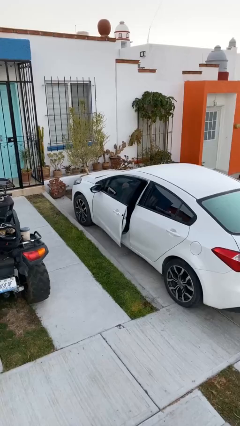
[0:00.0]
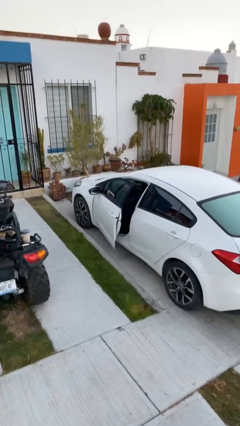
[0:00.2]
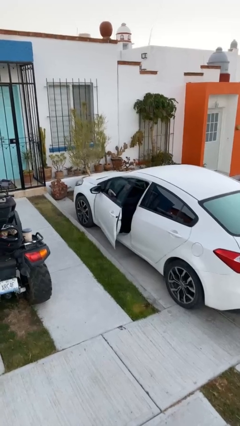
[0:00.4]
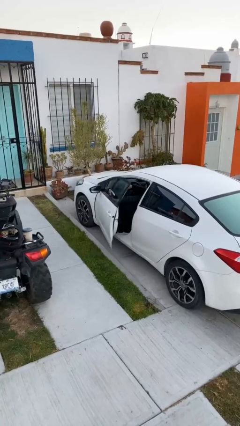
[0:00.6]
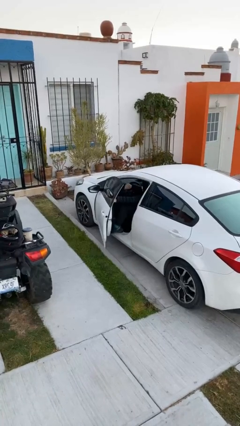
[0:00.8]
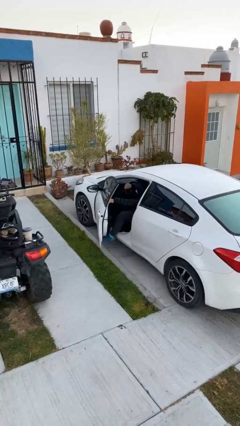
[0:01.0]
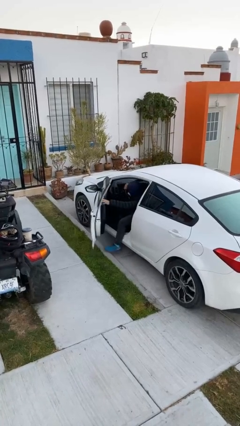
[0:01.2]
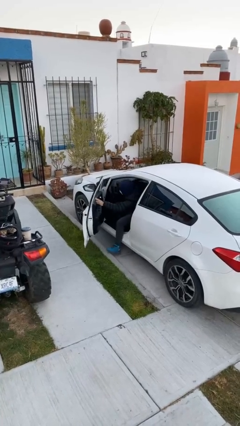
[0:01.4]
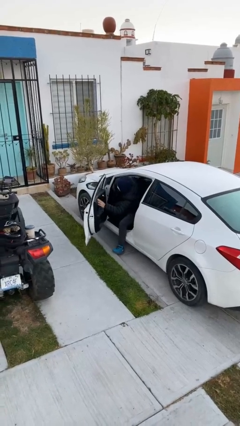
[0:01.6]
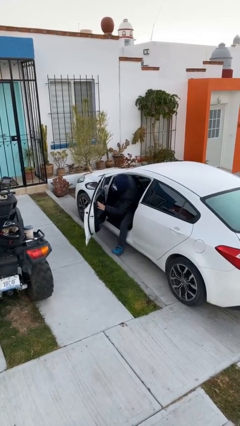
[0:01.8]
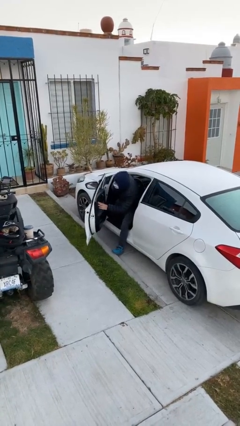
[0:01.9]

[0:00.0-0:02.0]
person opens car door

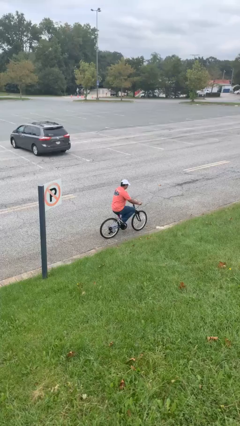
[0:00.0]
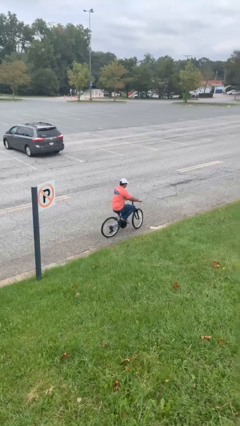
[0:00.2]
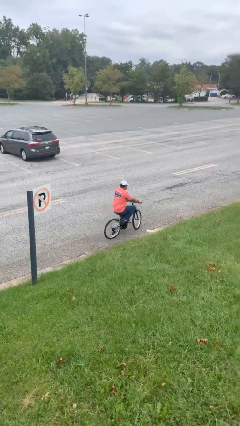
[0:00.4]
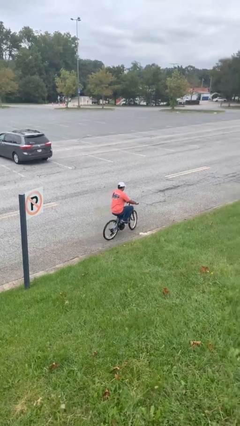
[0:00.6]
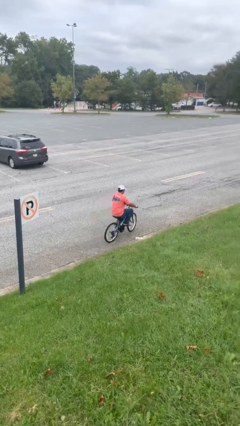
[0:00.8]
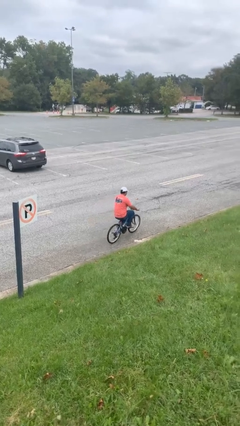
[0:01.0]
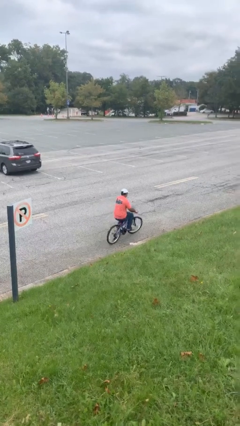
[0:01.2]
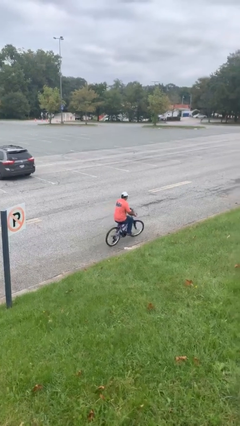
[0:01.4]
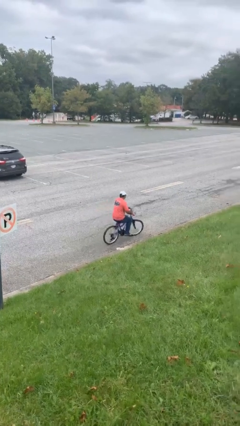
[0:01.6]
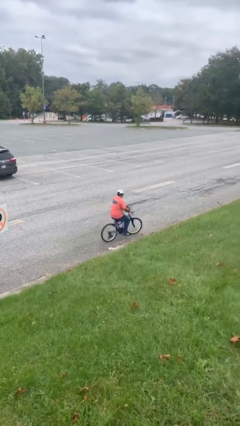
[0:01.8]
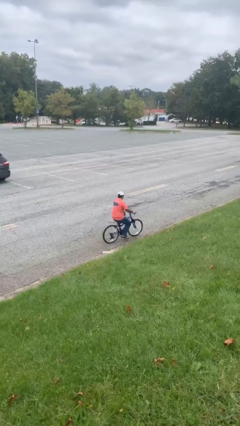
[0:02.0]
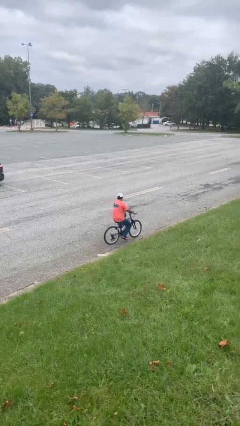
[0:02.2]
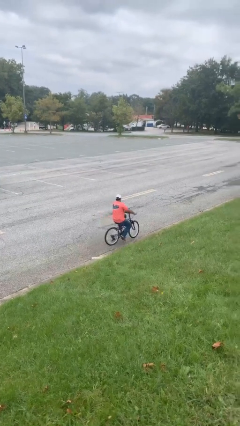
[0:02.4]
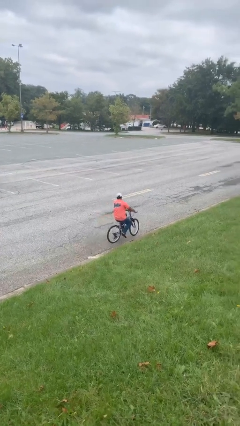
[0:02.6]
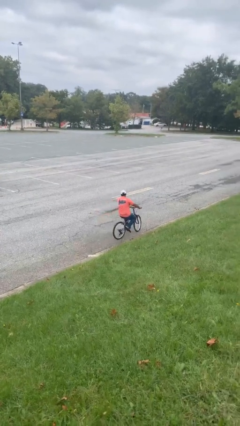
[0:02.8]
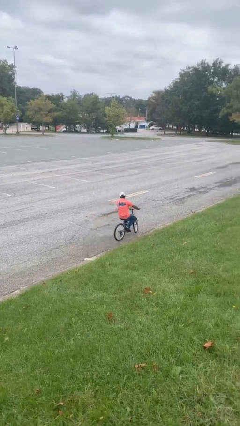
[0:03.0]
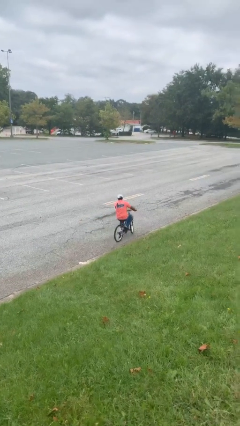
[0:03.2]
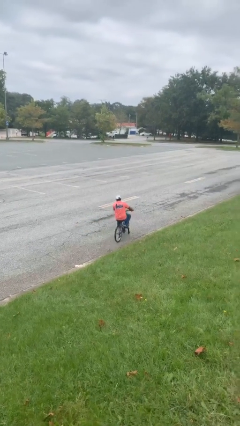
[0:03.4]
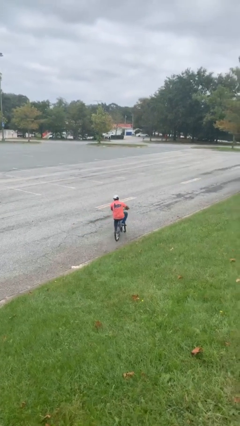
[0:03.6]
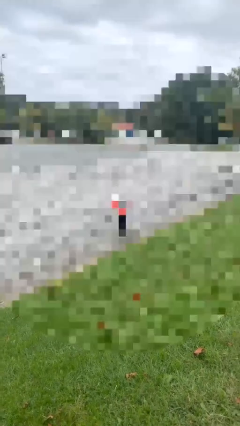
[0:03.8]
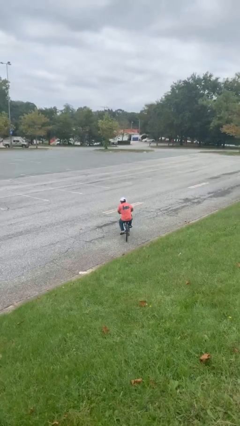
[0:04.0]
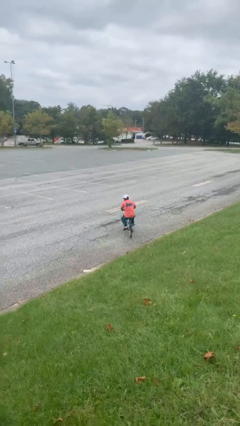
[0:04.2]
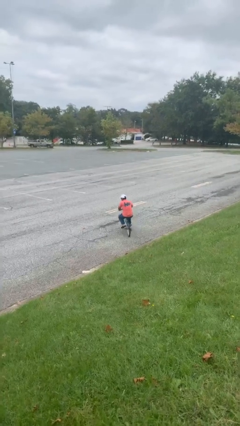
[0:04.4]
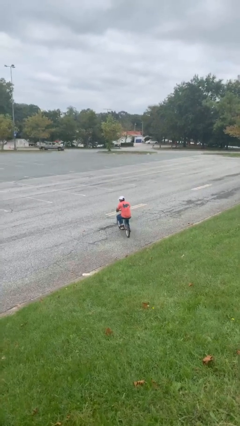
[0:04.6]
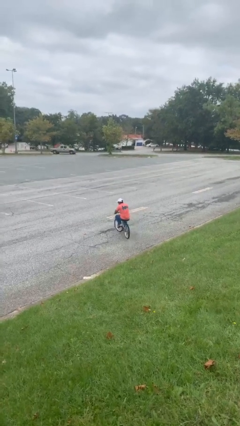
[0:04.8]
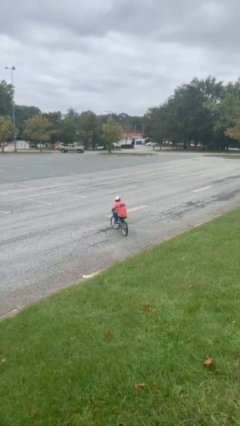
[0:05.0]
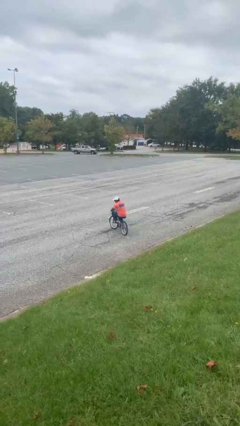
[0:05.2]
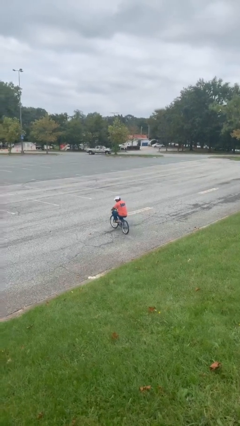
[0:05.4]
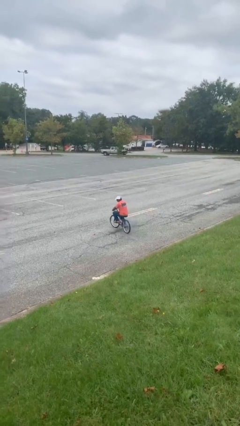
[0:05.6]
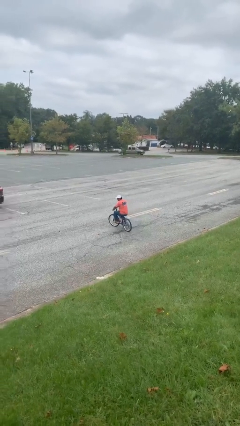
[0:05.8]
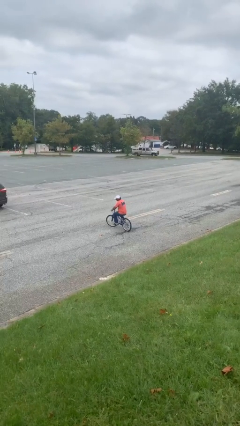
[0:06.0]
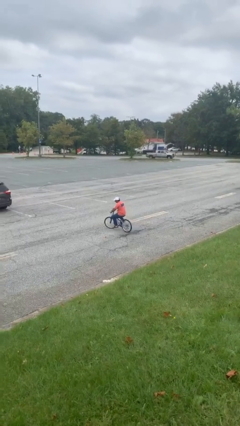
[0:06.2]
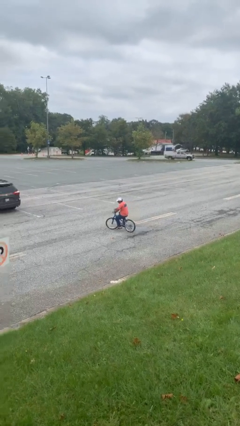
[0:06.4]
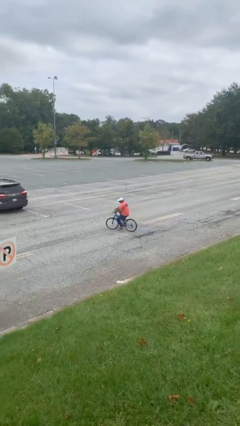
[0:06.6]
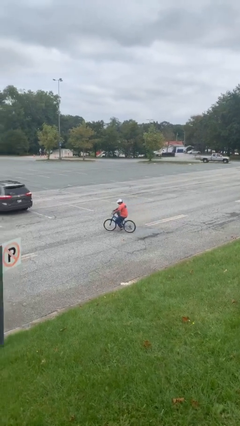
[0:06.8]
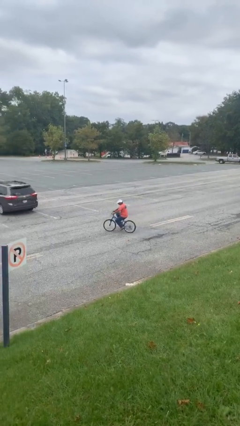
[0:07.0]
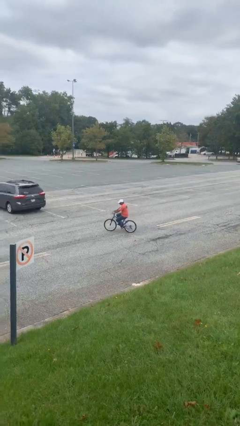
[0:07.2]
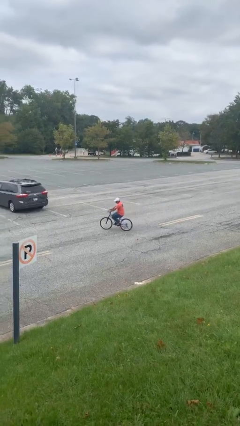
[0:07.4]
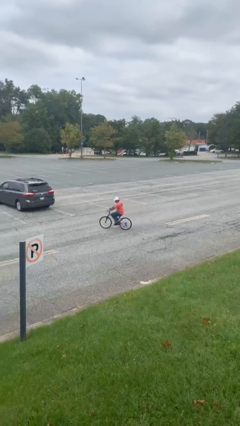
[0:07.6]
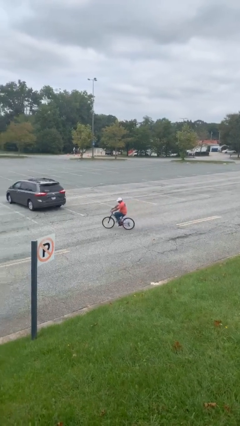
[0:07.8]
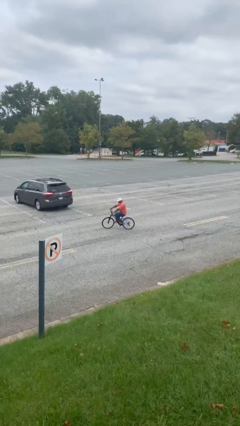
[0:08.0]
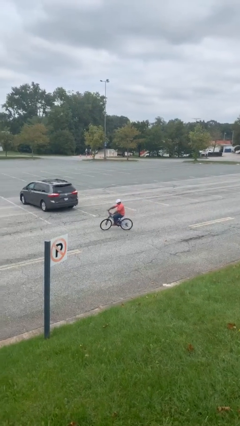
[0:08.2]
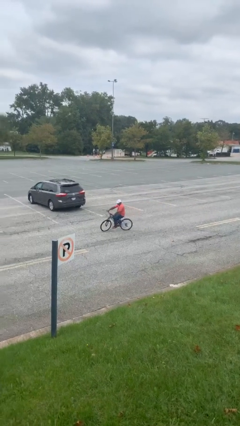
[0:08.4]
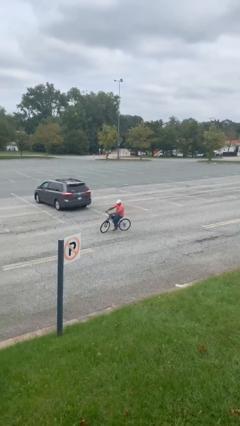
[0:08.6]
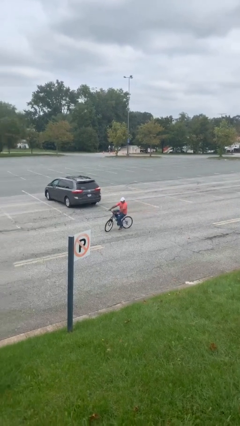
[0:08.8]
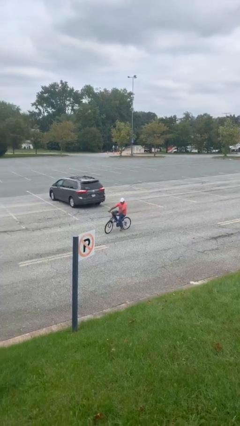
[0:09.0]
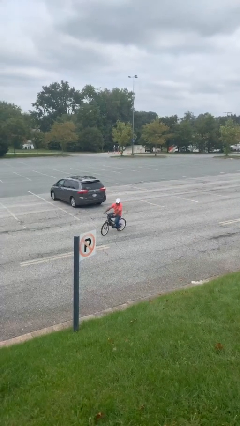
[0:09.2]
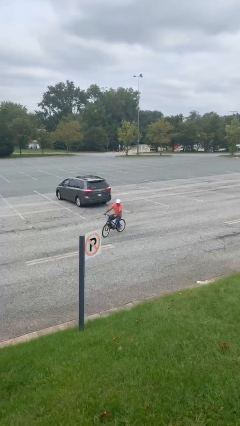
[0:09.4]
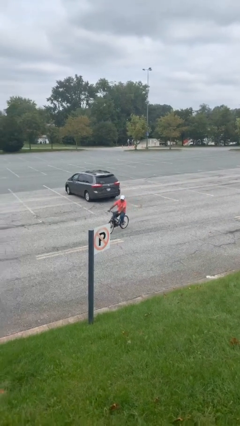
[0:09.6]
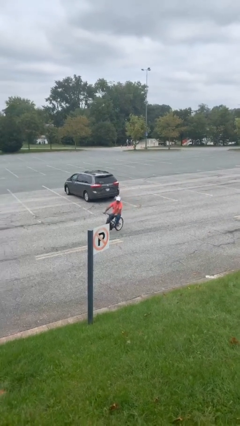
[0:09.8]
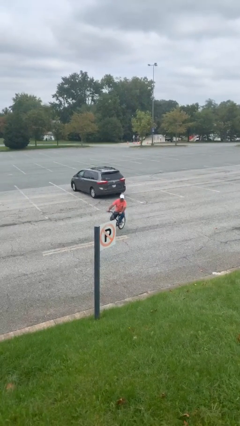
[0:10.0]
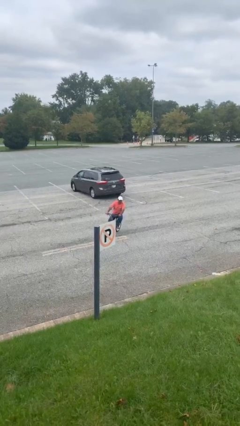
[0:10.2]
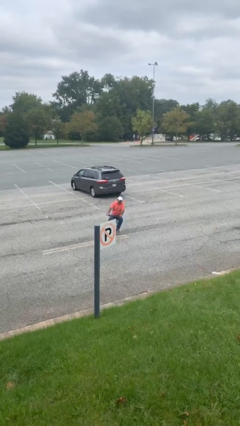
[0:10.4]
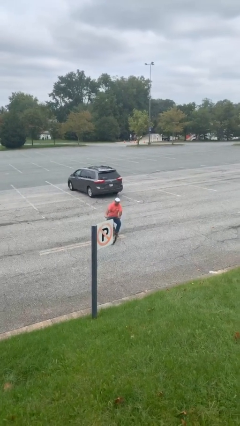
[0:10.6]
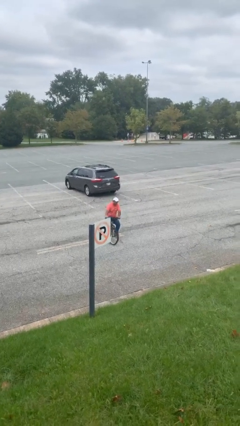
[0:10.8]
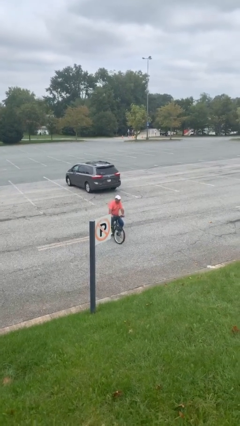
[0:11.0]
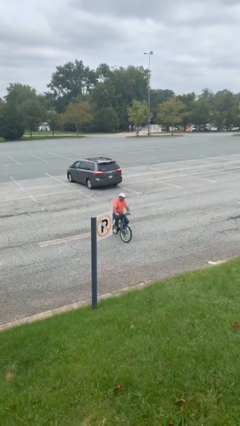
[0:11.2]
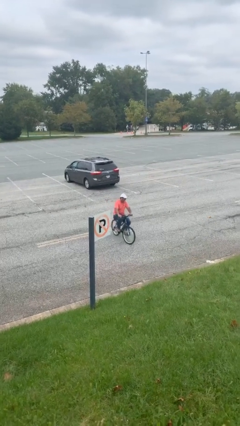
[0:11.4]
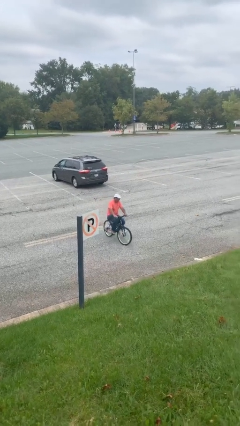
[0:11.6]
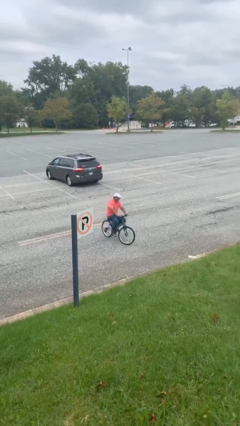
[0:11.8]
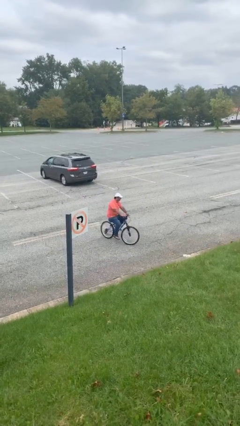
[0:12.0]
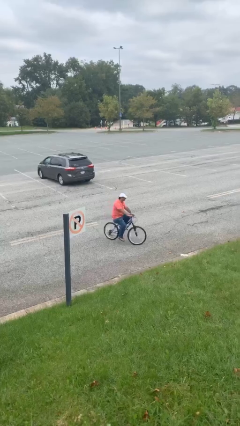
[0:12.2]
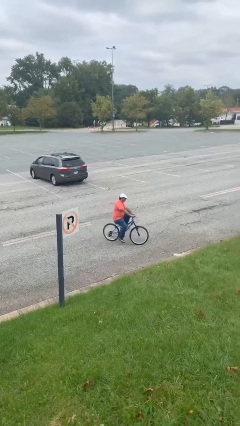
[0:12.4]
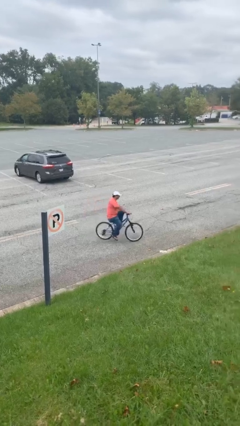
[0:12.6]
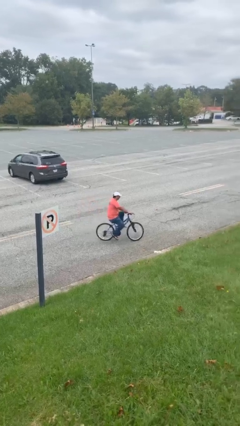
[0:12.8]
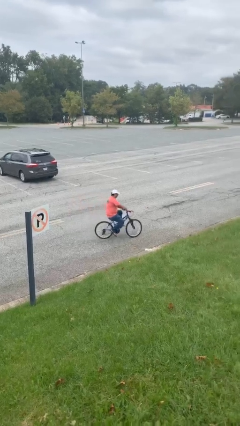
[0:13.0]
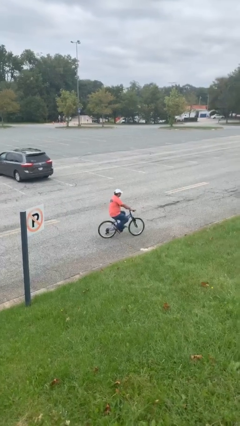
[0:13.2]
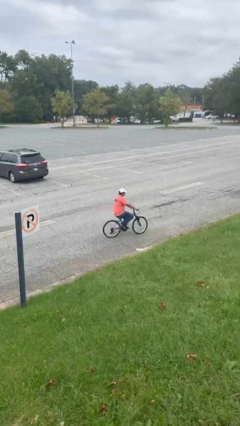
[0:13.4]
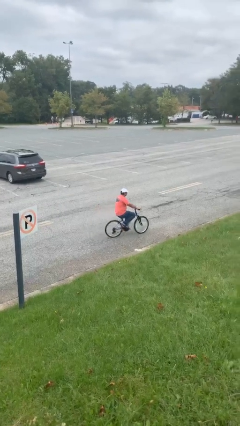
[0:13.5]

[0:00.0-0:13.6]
person rides bicycle

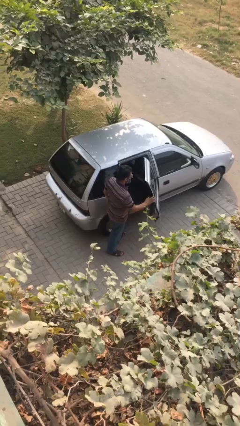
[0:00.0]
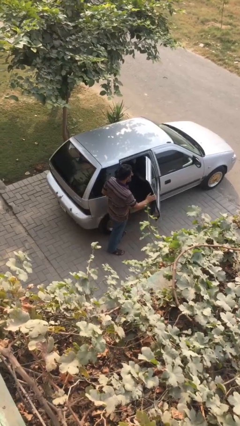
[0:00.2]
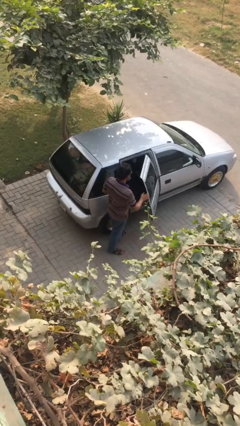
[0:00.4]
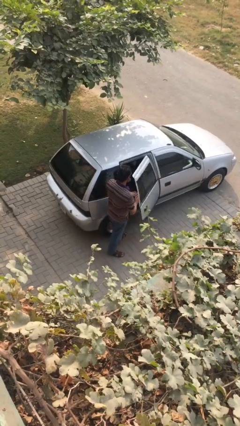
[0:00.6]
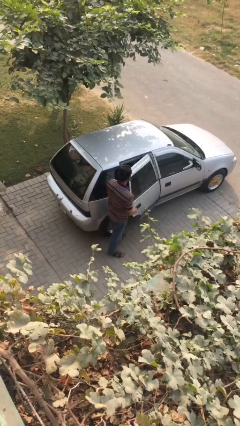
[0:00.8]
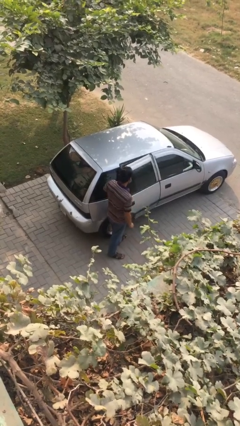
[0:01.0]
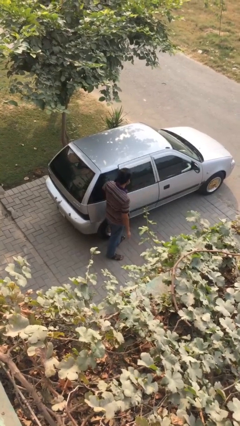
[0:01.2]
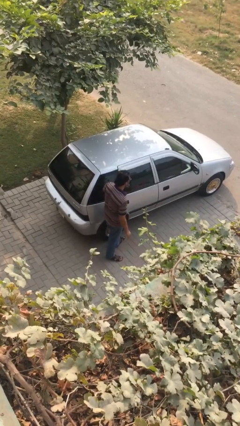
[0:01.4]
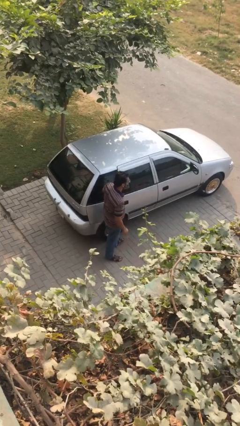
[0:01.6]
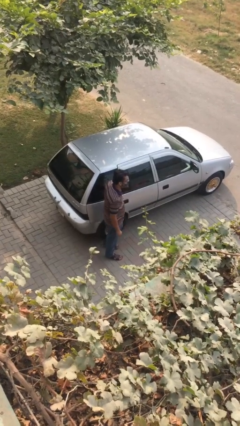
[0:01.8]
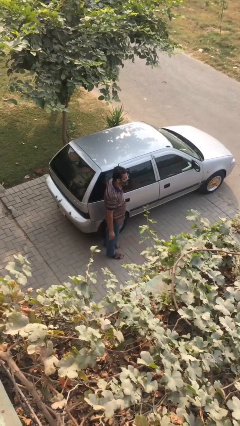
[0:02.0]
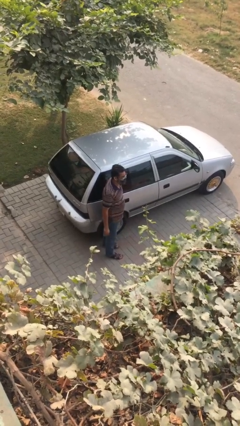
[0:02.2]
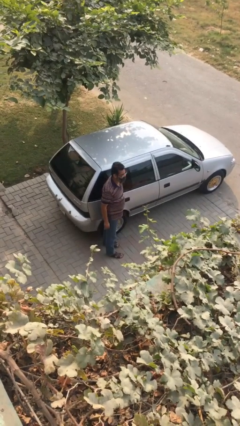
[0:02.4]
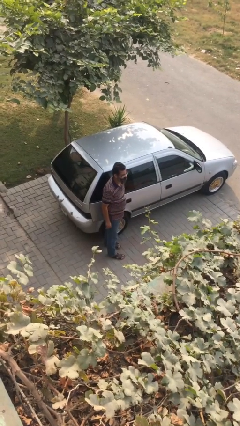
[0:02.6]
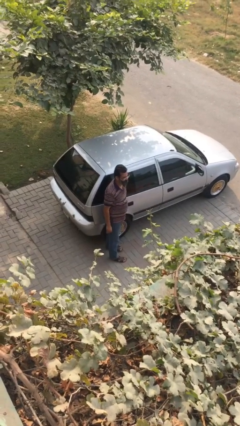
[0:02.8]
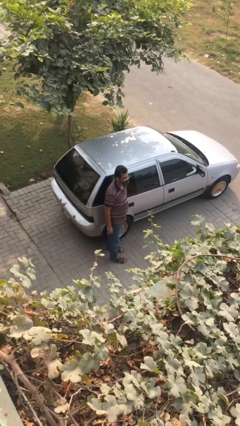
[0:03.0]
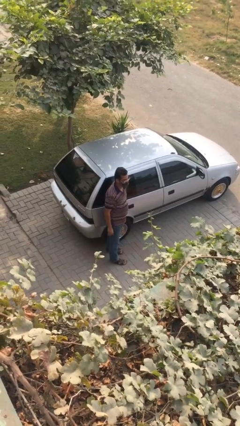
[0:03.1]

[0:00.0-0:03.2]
person closes car door
